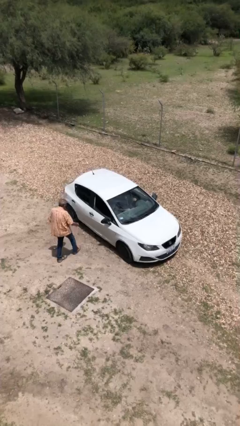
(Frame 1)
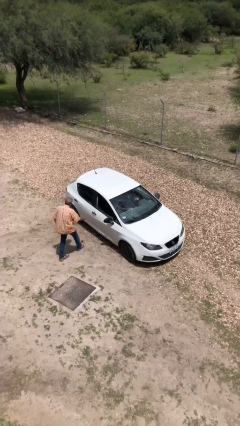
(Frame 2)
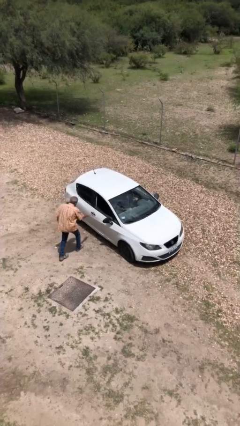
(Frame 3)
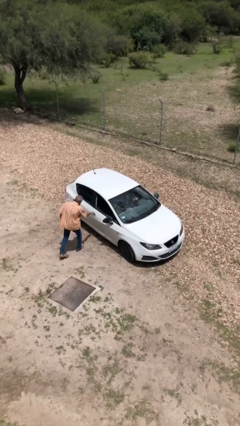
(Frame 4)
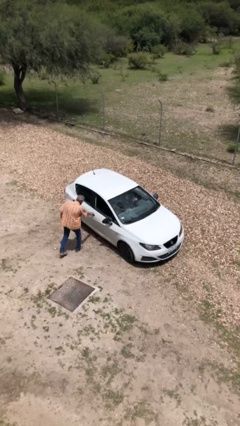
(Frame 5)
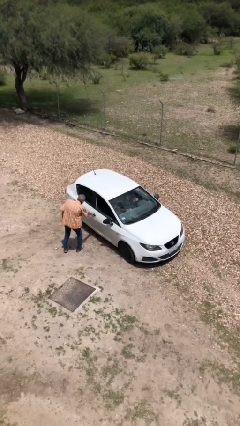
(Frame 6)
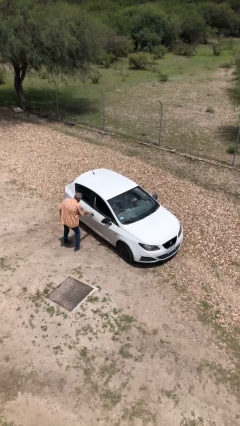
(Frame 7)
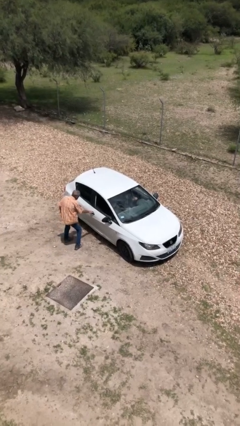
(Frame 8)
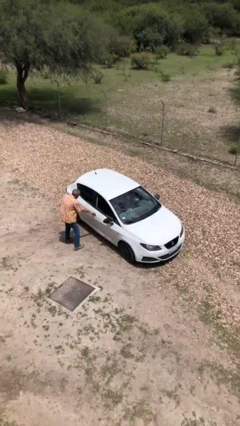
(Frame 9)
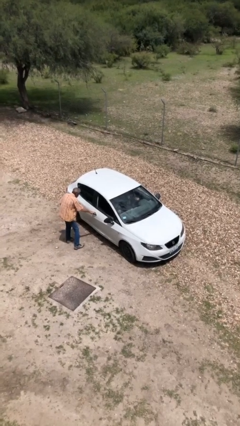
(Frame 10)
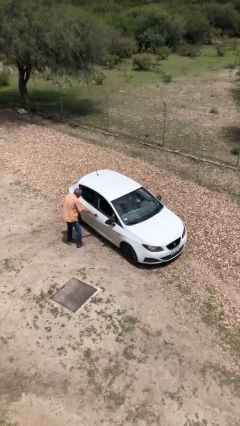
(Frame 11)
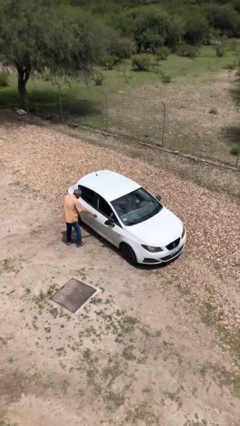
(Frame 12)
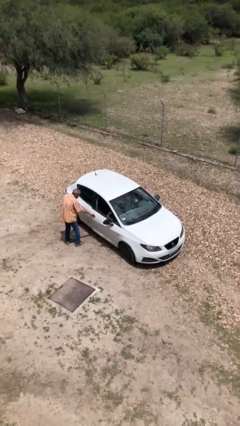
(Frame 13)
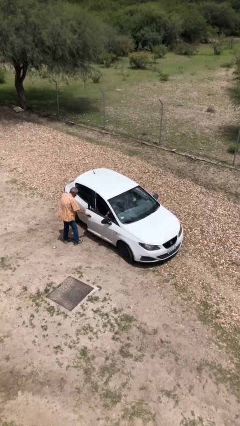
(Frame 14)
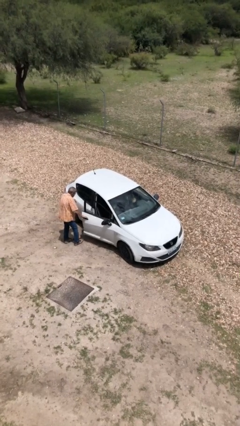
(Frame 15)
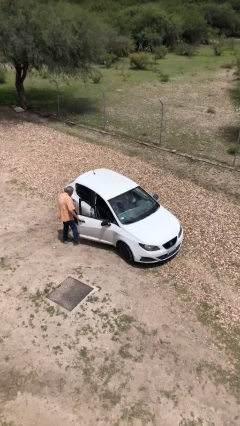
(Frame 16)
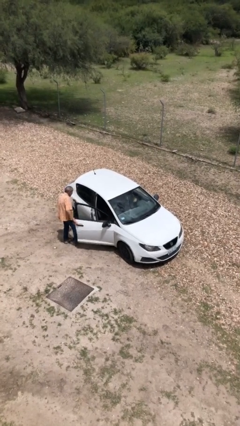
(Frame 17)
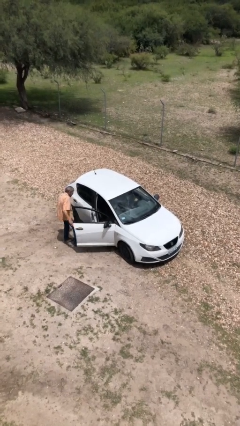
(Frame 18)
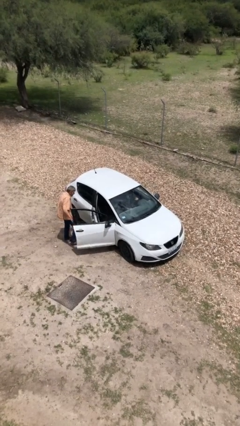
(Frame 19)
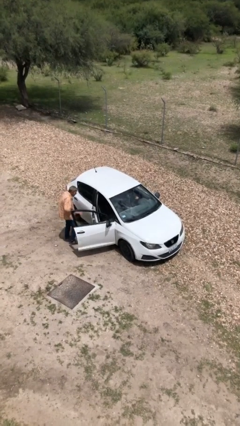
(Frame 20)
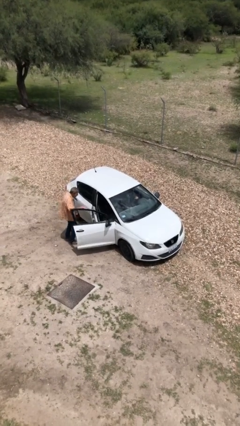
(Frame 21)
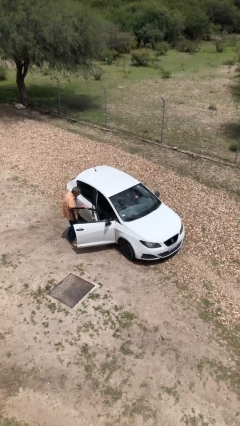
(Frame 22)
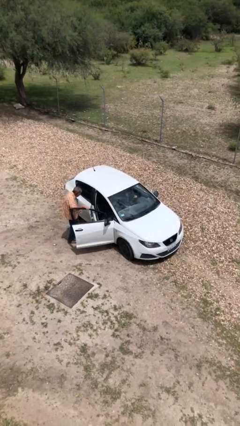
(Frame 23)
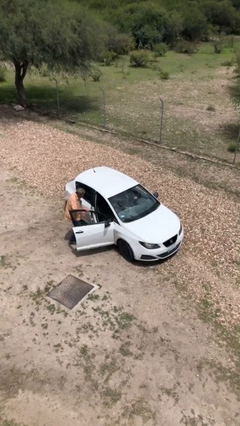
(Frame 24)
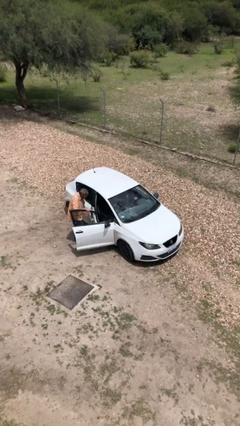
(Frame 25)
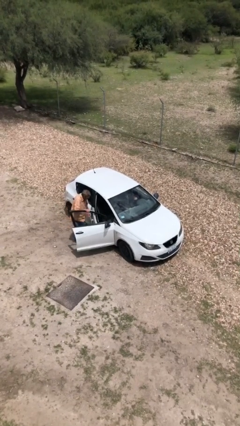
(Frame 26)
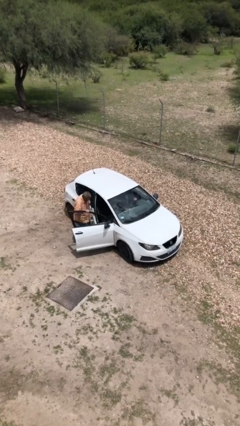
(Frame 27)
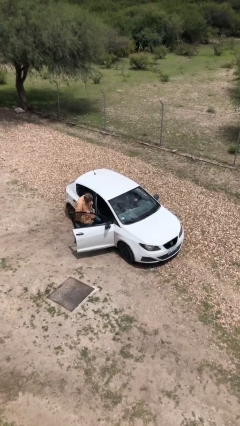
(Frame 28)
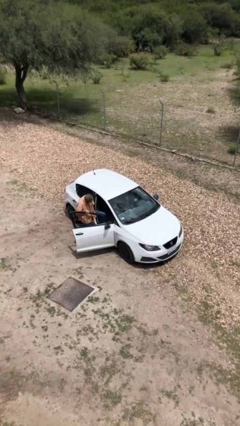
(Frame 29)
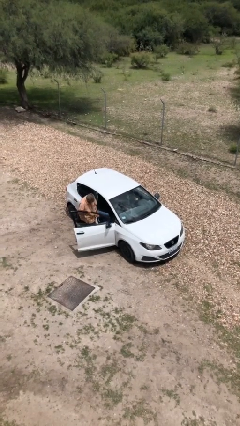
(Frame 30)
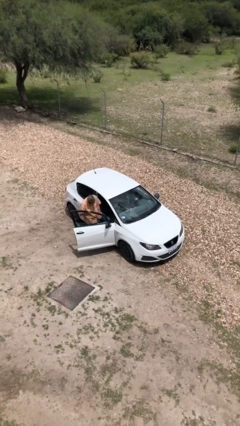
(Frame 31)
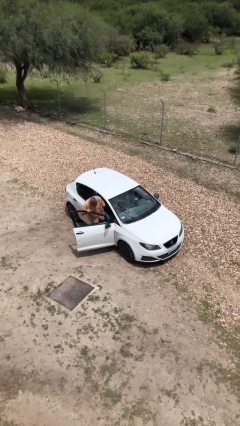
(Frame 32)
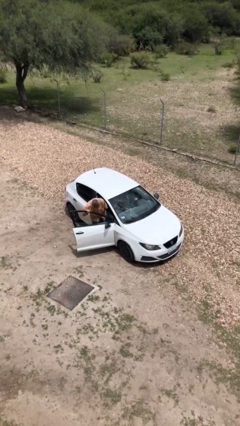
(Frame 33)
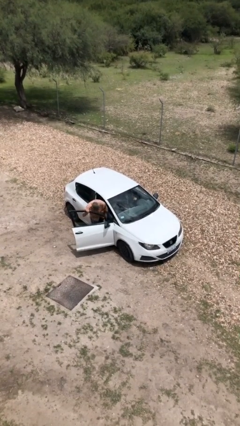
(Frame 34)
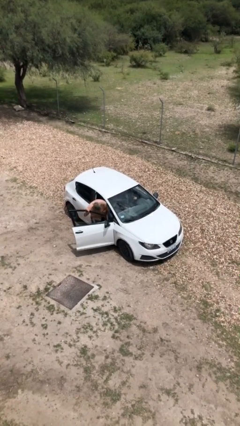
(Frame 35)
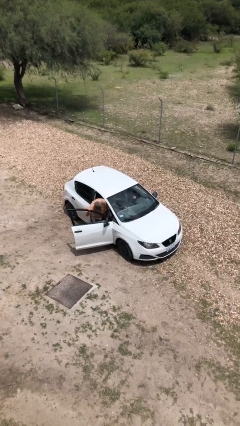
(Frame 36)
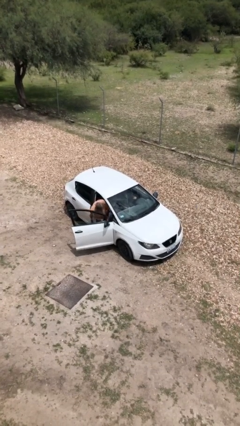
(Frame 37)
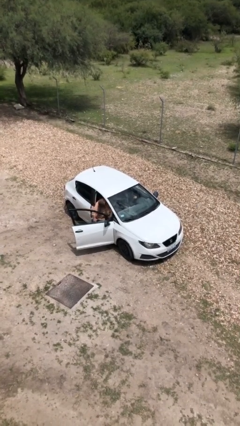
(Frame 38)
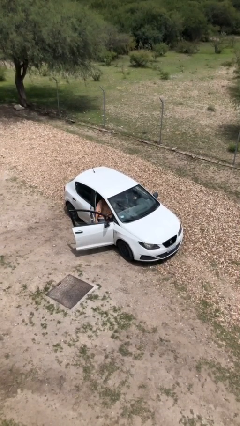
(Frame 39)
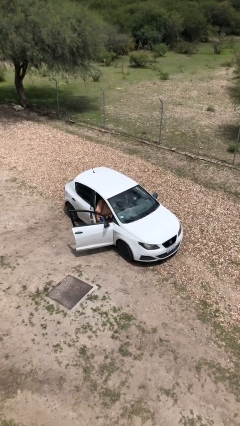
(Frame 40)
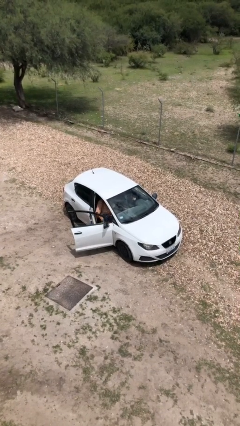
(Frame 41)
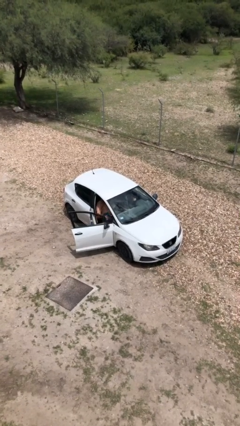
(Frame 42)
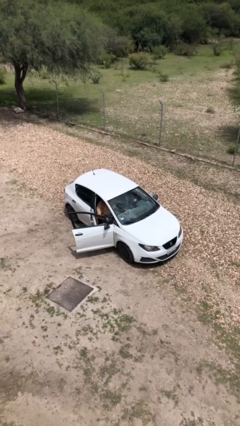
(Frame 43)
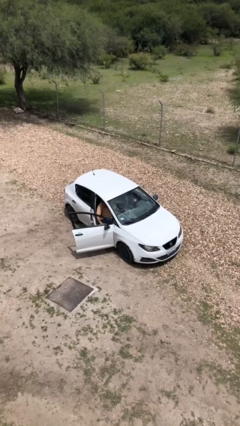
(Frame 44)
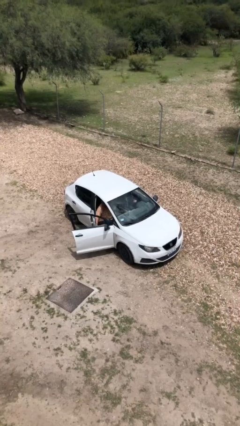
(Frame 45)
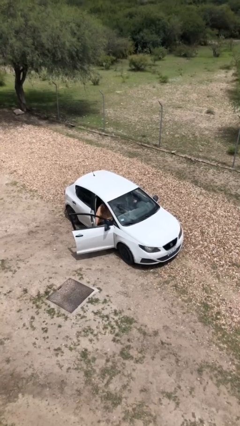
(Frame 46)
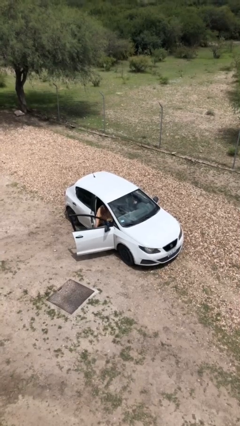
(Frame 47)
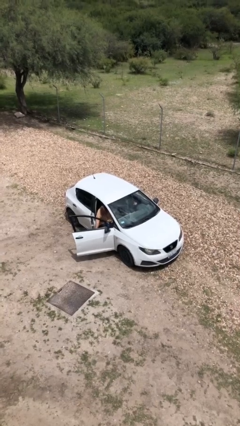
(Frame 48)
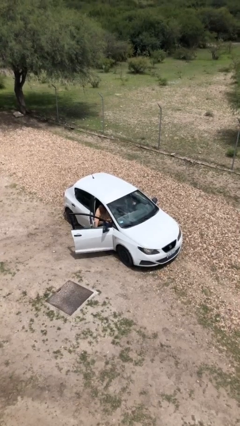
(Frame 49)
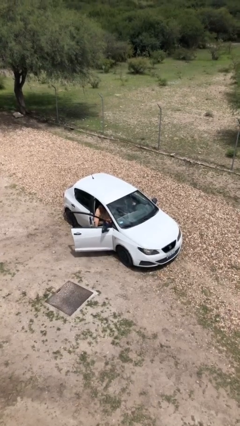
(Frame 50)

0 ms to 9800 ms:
car picks up person

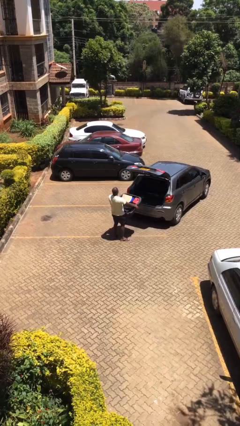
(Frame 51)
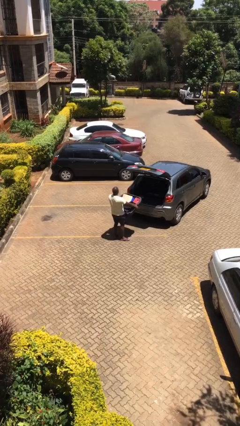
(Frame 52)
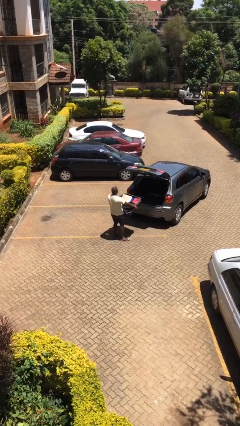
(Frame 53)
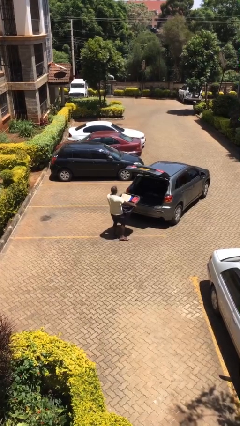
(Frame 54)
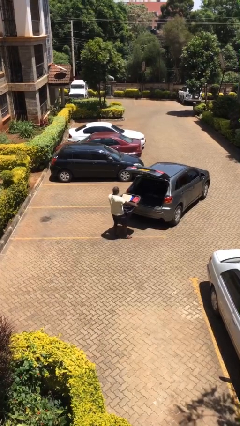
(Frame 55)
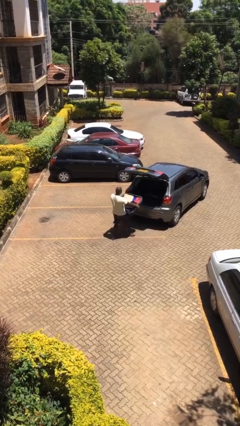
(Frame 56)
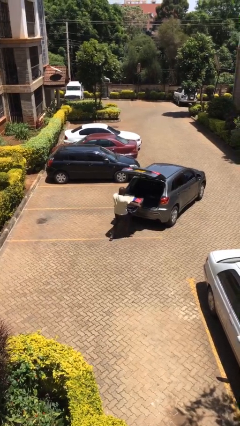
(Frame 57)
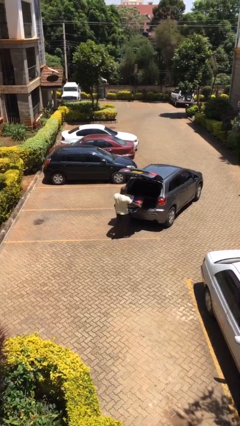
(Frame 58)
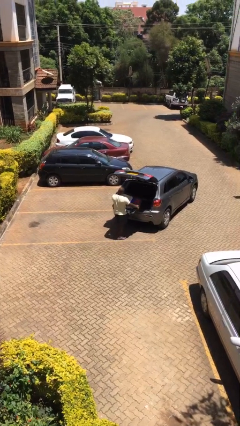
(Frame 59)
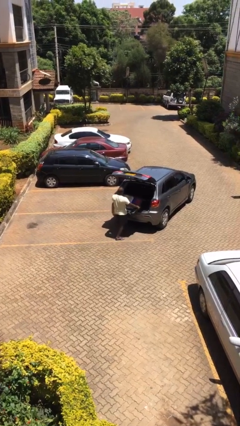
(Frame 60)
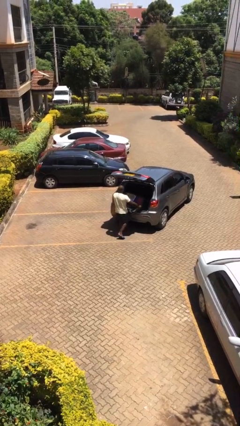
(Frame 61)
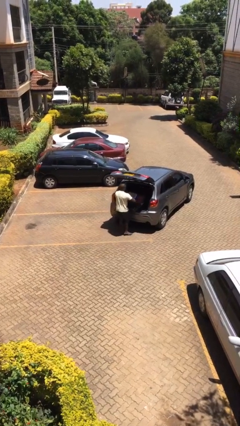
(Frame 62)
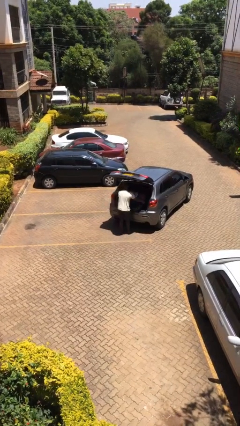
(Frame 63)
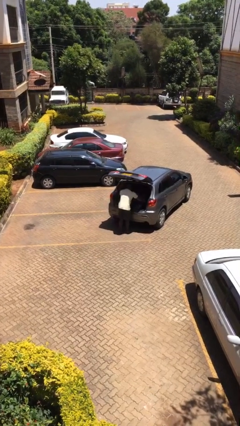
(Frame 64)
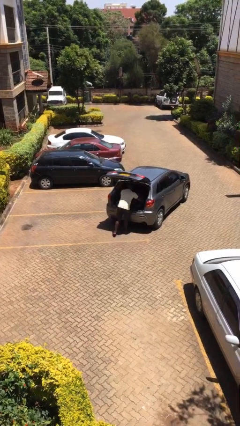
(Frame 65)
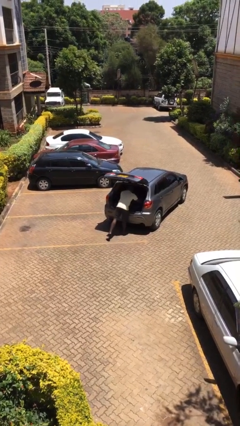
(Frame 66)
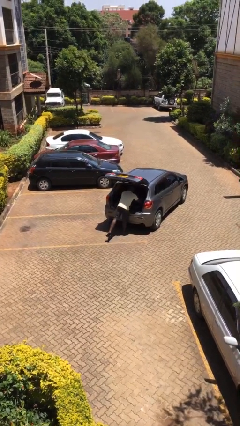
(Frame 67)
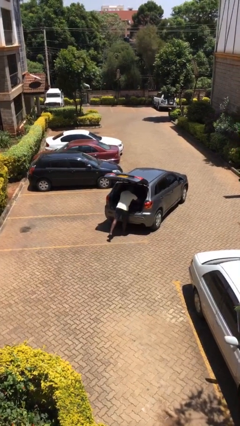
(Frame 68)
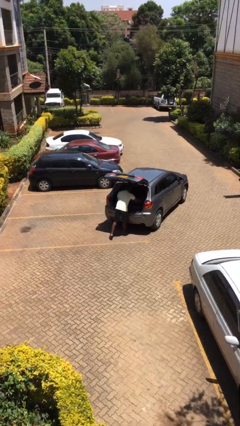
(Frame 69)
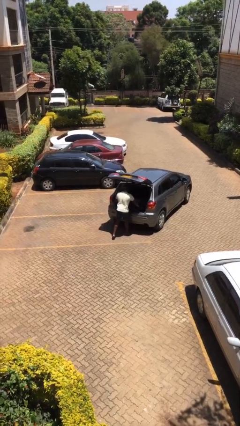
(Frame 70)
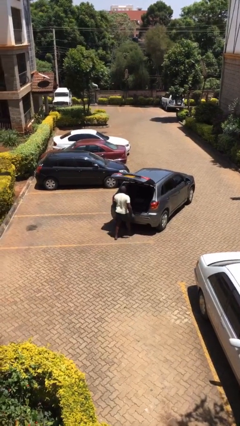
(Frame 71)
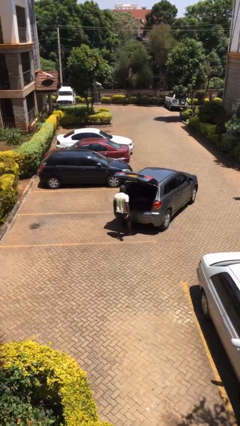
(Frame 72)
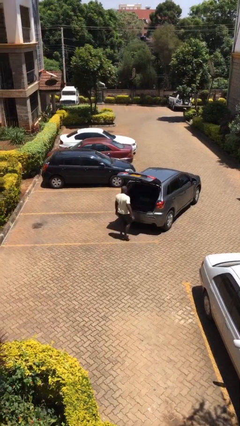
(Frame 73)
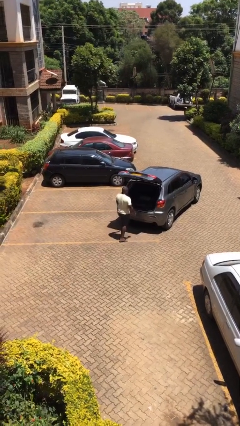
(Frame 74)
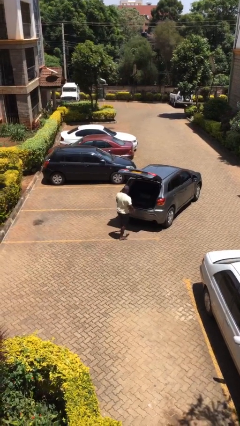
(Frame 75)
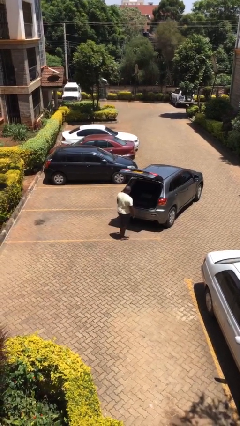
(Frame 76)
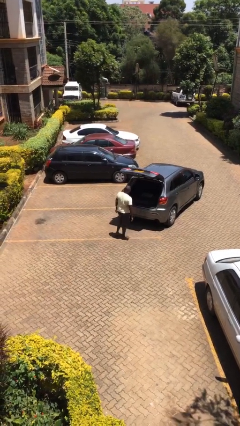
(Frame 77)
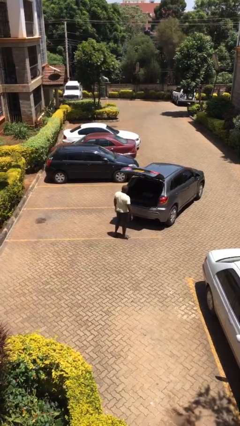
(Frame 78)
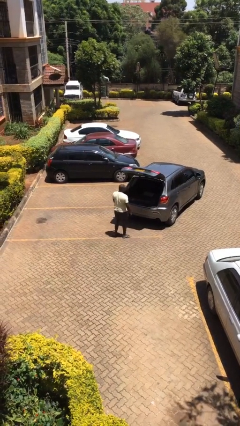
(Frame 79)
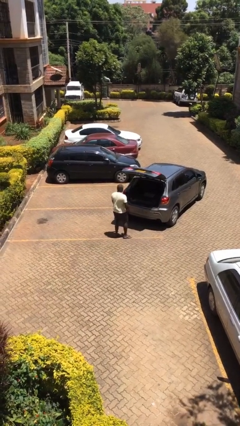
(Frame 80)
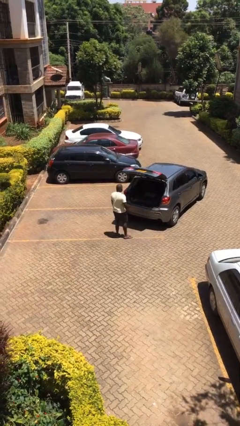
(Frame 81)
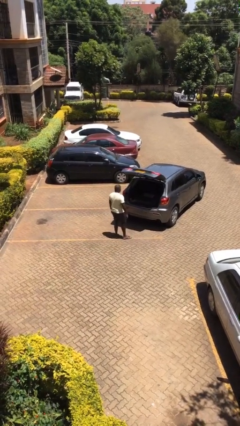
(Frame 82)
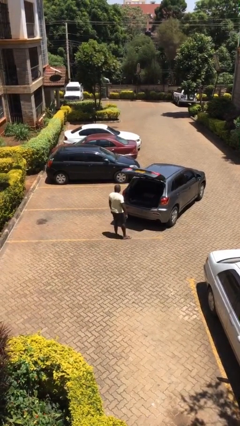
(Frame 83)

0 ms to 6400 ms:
person loads car

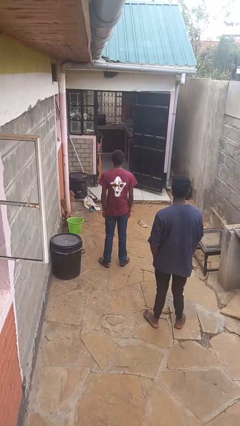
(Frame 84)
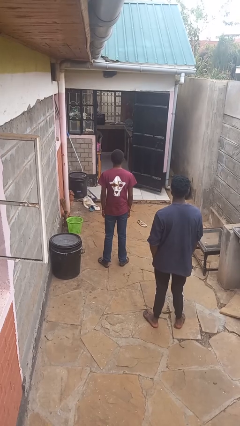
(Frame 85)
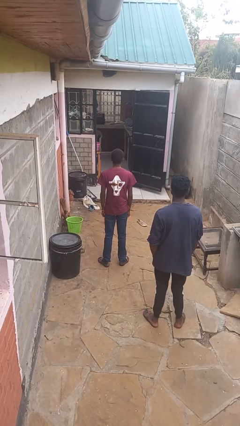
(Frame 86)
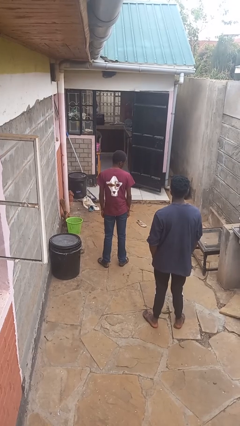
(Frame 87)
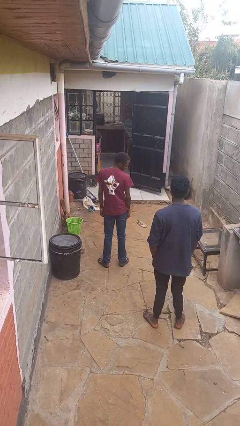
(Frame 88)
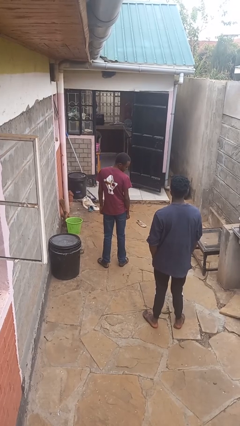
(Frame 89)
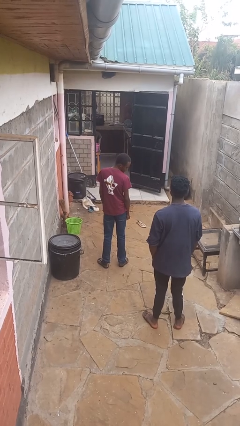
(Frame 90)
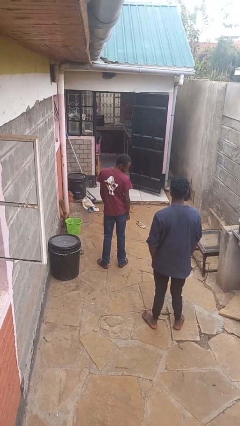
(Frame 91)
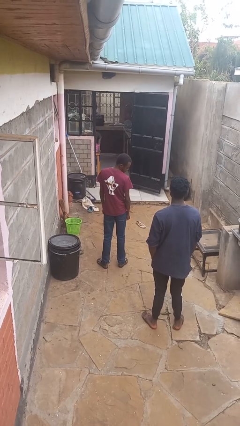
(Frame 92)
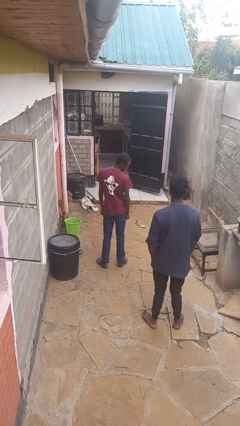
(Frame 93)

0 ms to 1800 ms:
person looks over shoulder

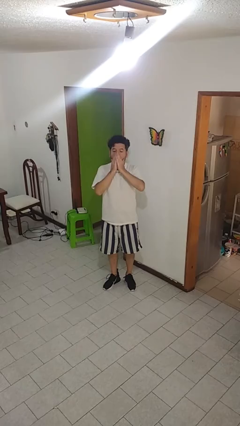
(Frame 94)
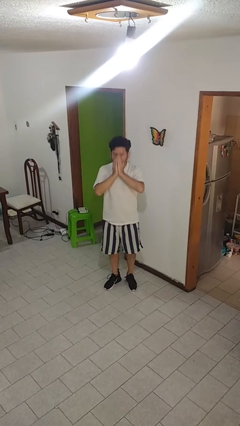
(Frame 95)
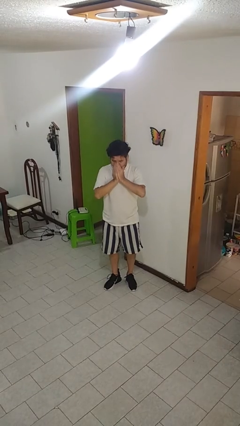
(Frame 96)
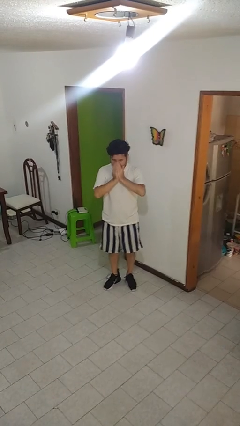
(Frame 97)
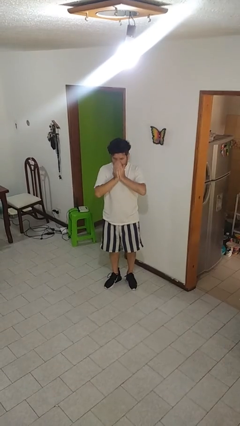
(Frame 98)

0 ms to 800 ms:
person sneezes into hand
